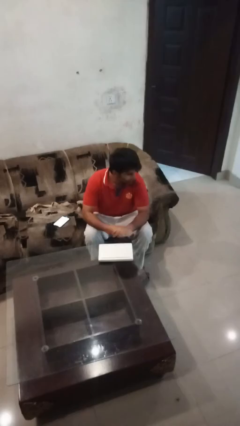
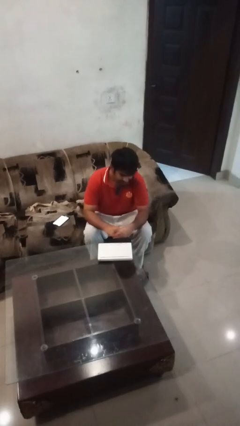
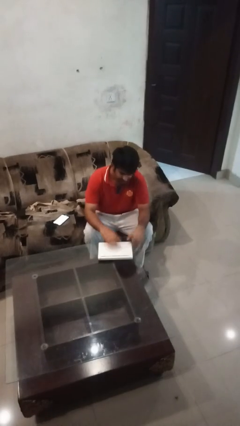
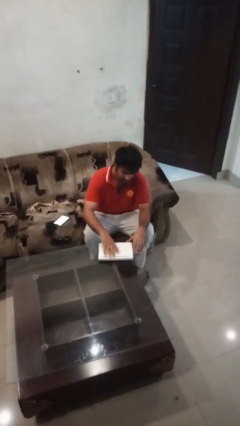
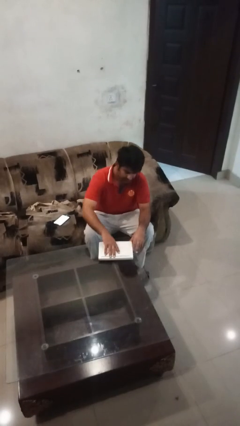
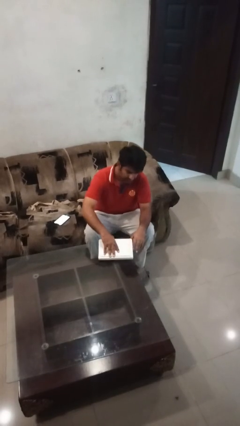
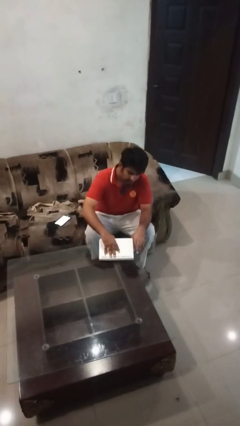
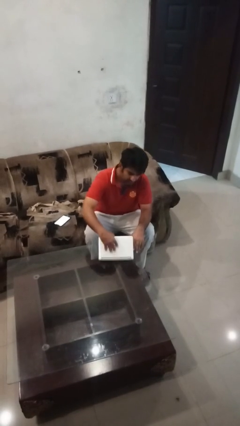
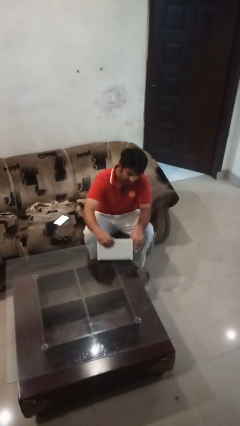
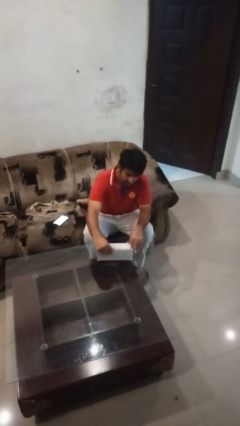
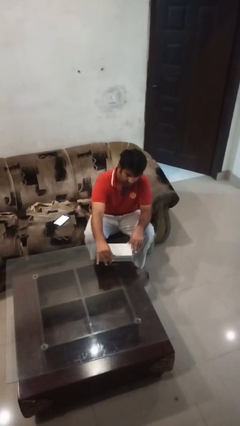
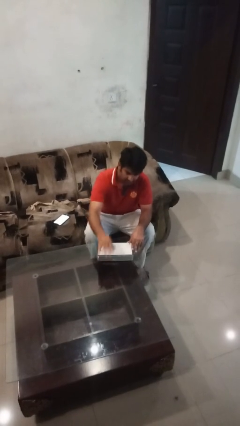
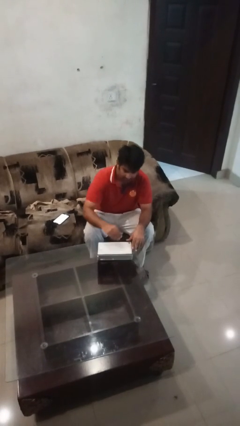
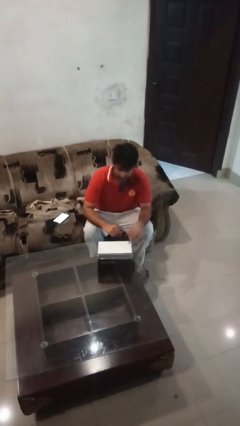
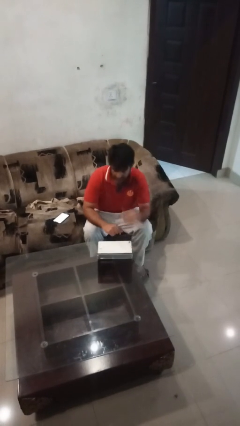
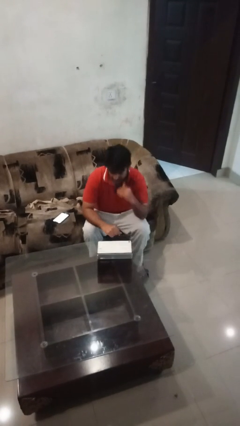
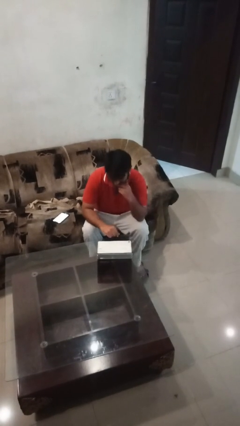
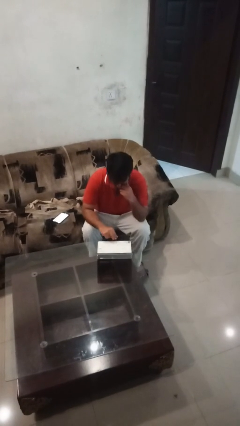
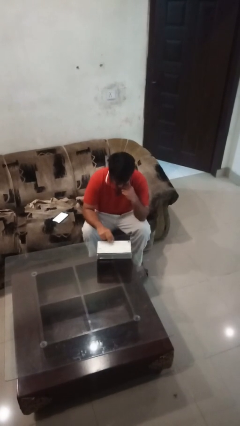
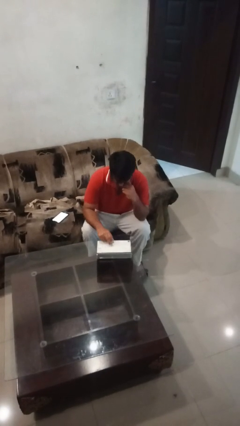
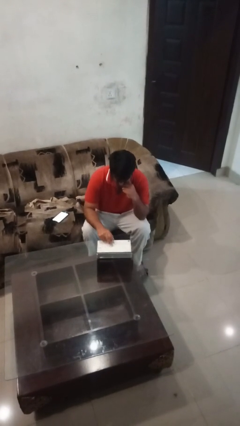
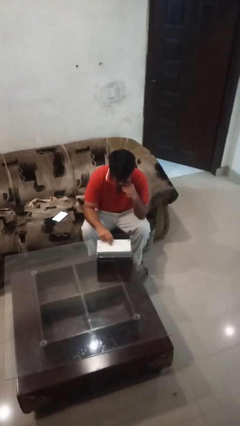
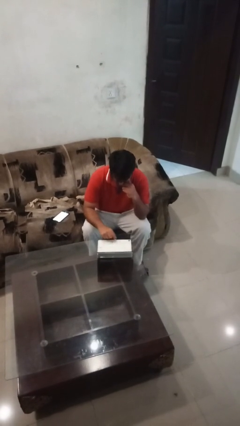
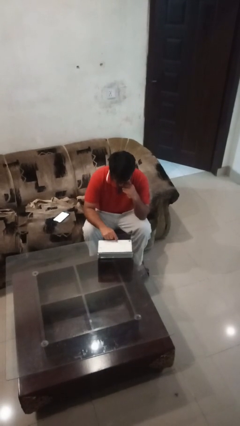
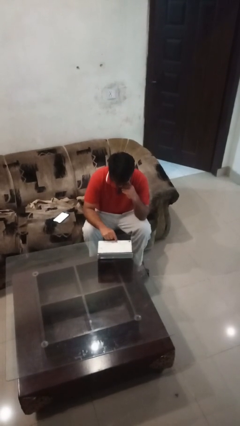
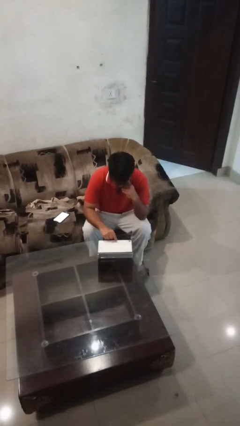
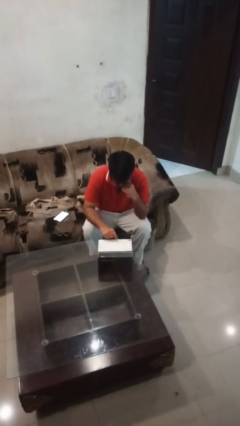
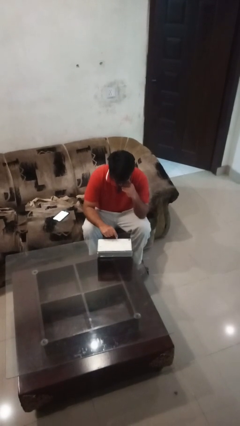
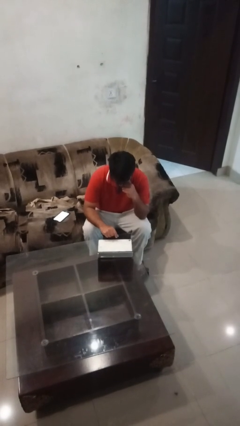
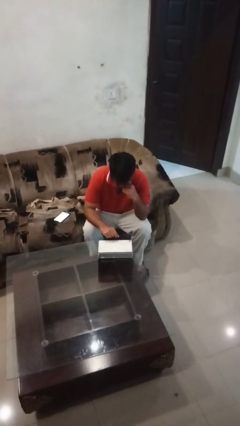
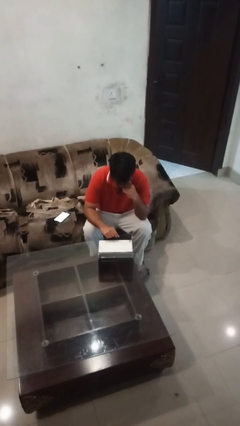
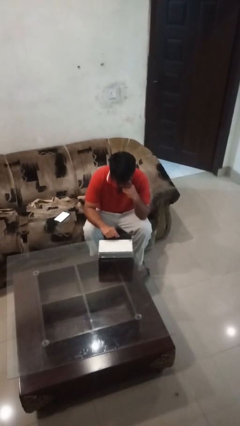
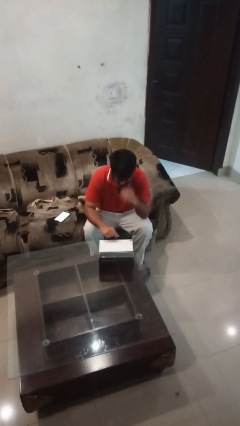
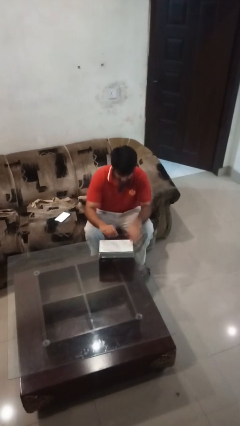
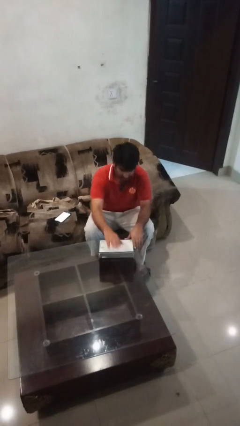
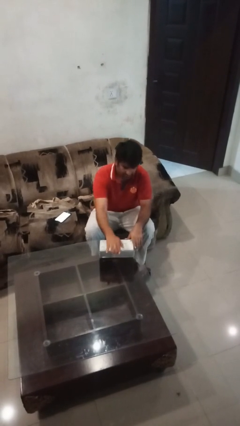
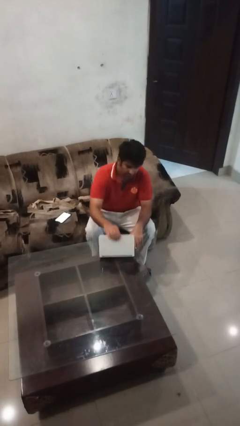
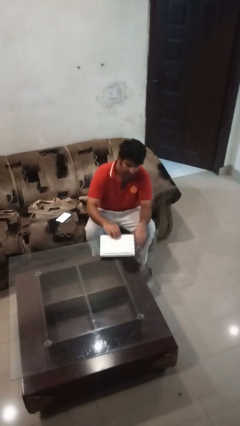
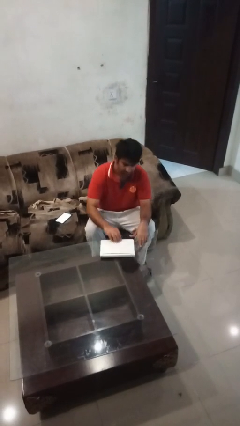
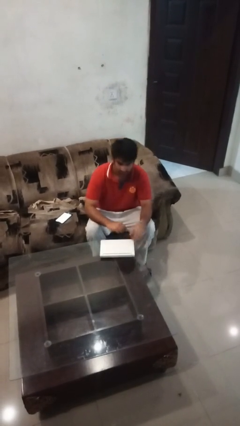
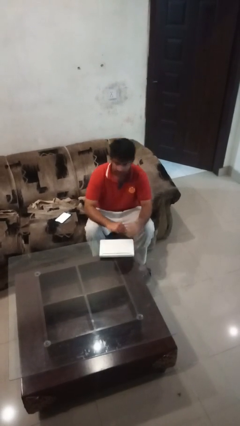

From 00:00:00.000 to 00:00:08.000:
person interacts with laptop

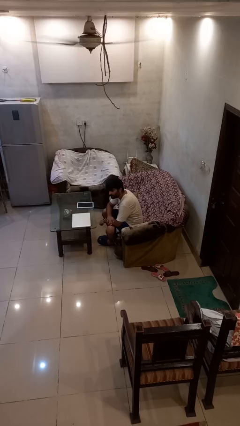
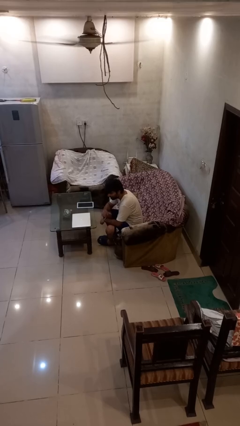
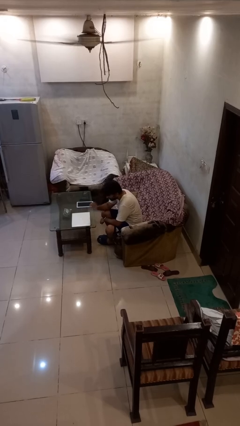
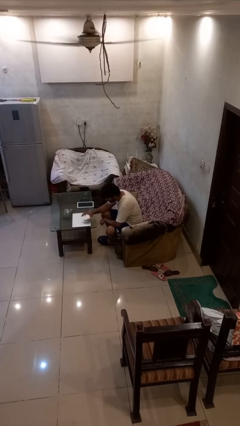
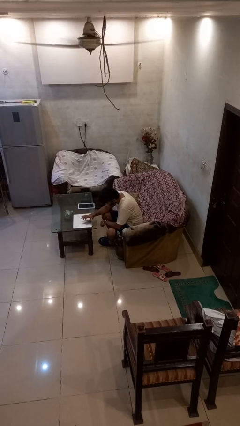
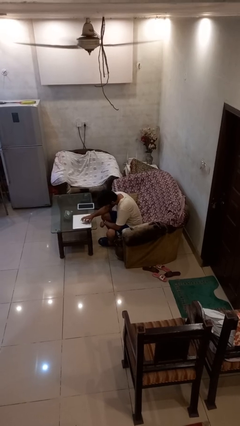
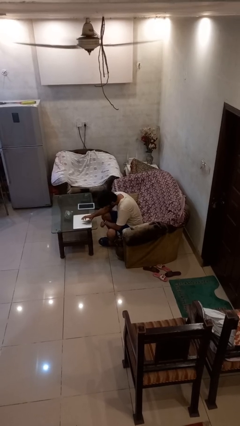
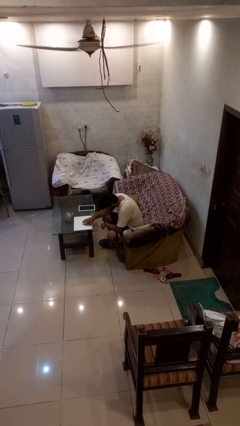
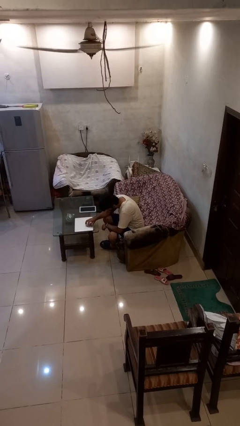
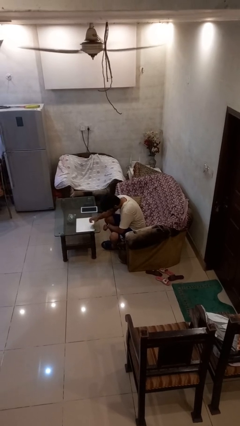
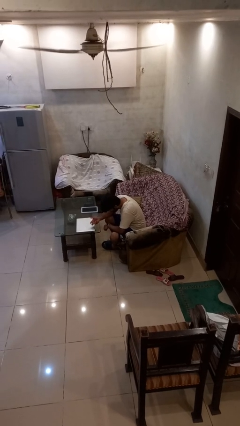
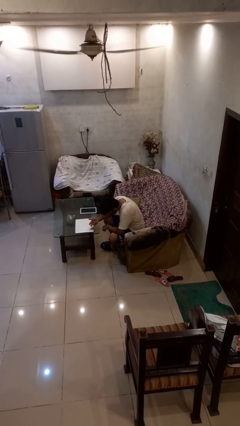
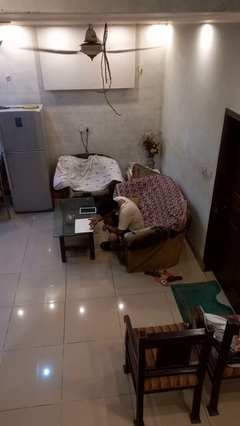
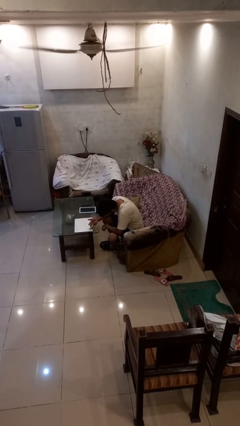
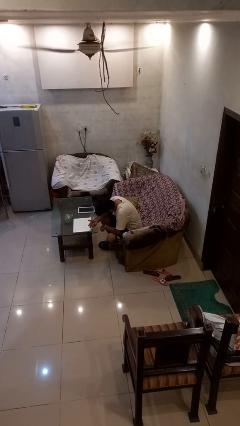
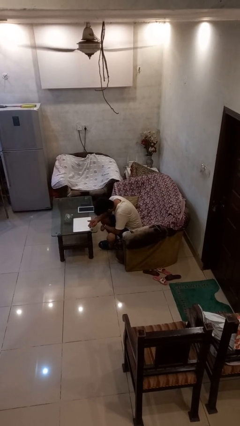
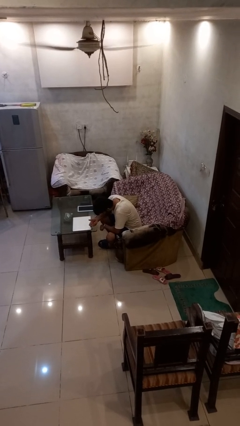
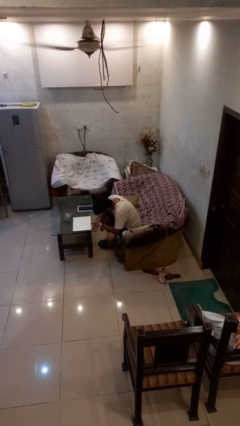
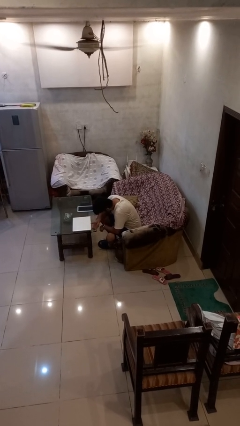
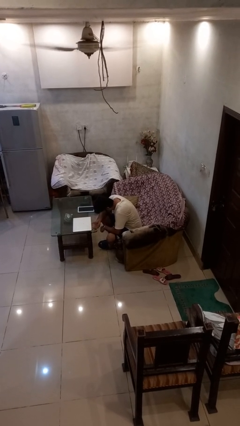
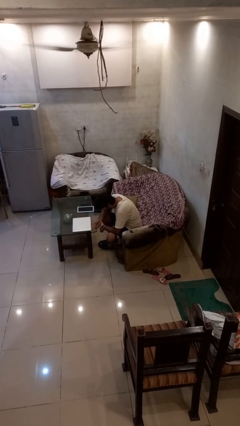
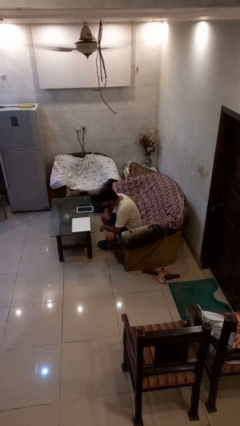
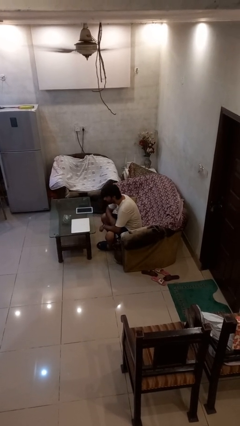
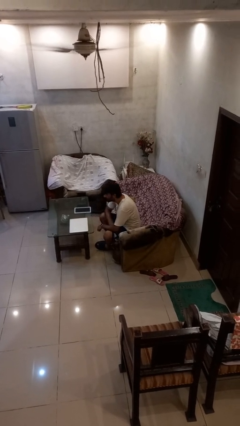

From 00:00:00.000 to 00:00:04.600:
person taps object with finger

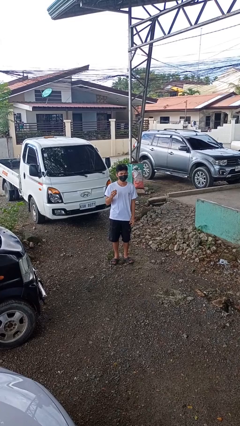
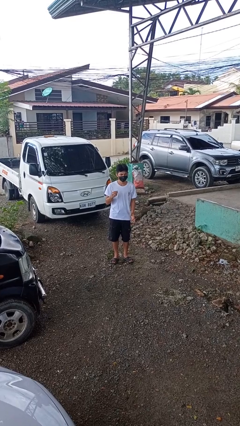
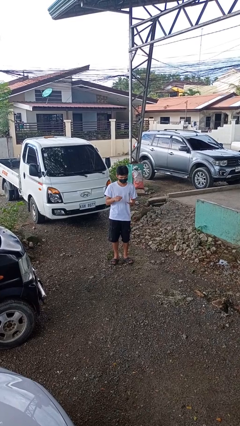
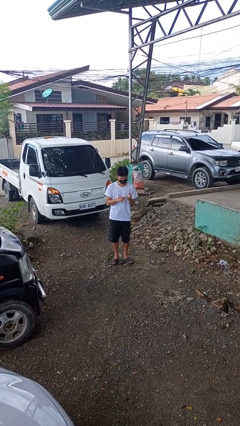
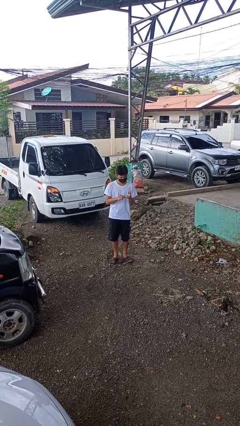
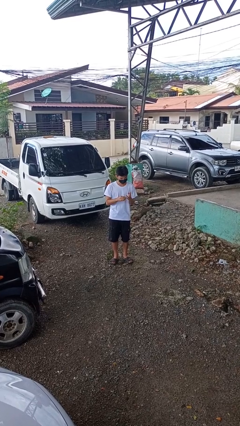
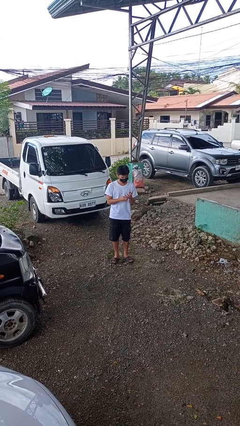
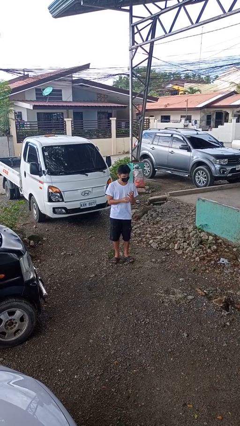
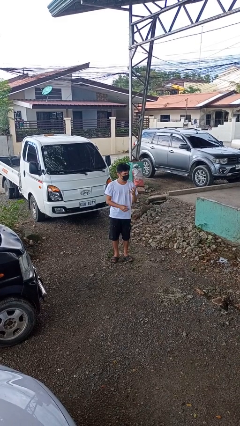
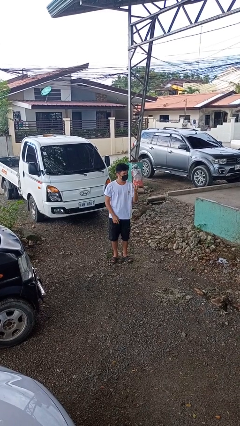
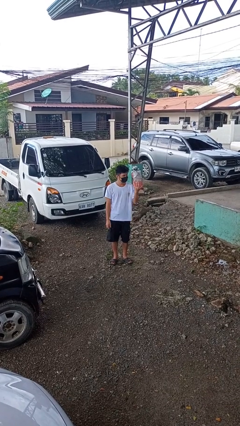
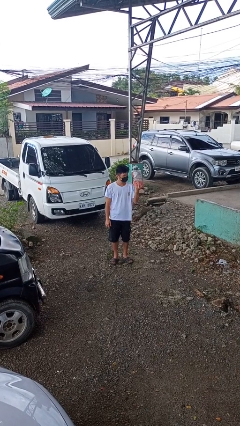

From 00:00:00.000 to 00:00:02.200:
person puts on ring

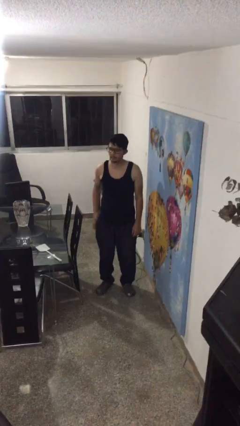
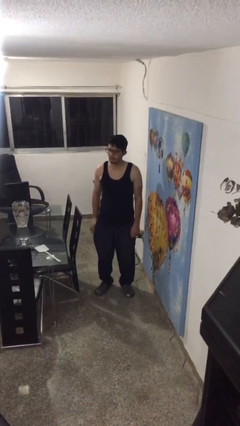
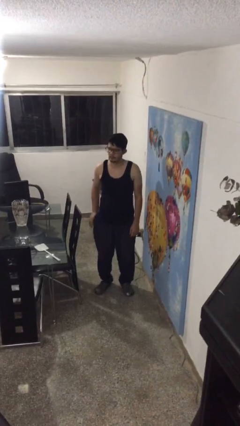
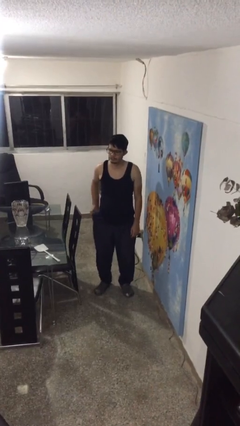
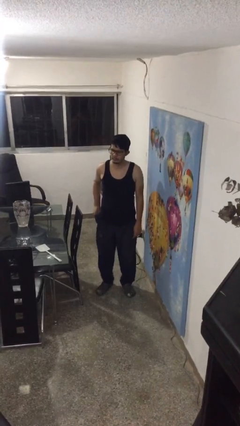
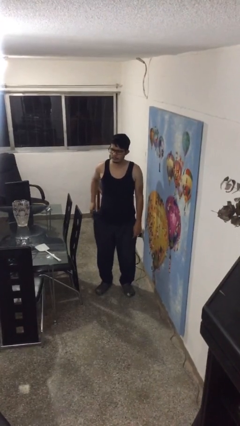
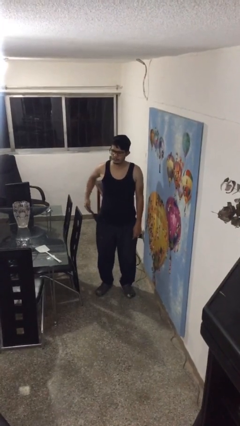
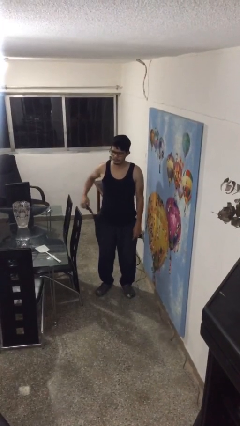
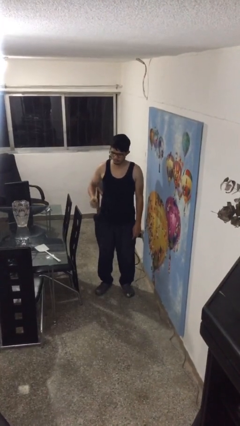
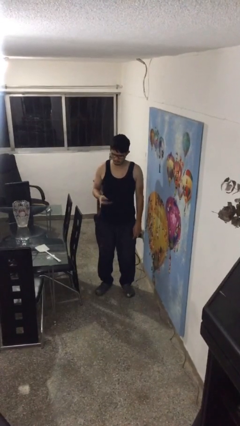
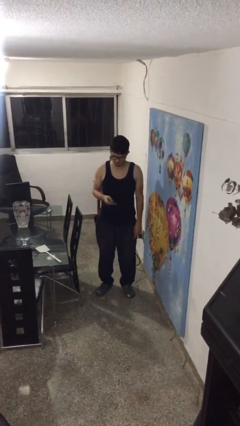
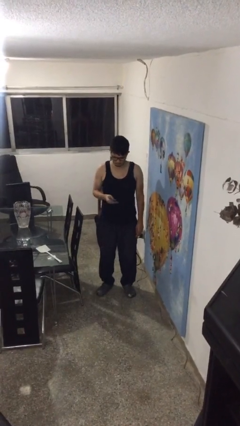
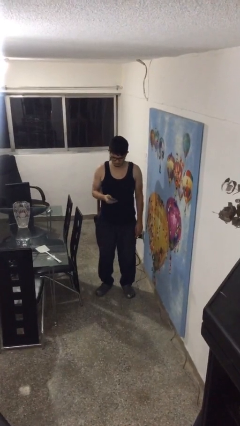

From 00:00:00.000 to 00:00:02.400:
person takes phone from pocket

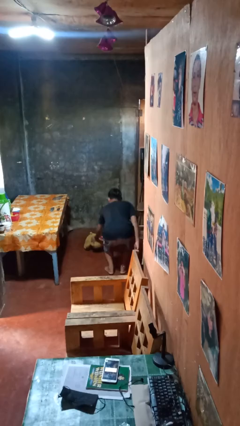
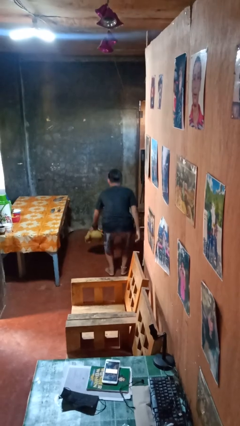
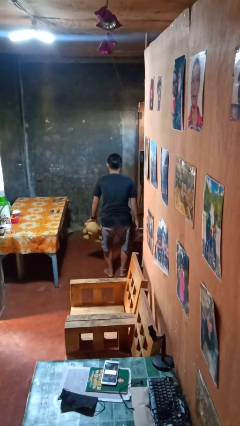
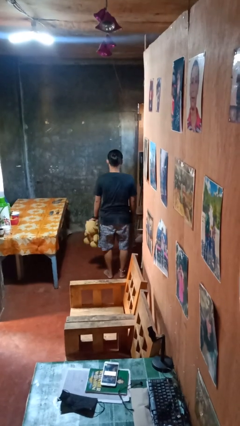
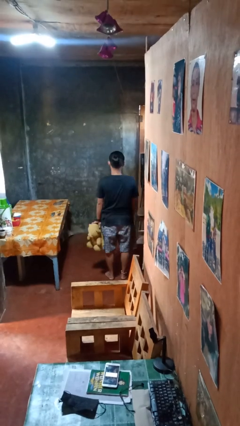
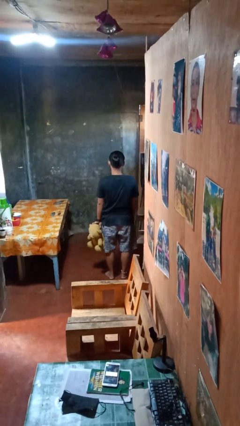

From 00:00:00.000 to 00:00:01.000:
person picks up object from floor
